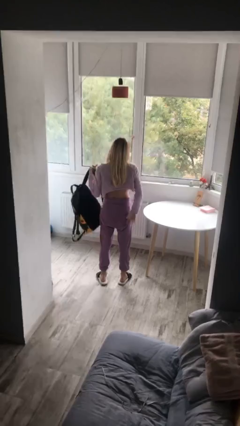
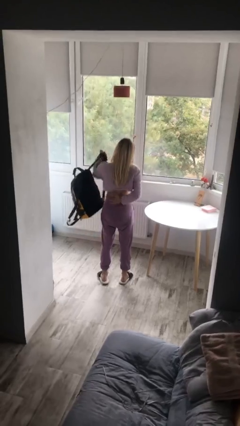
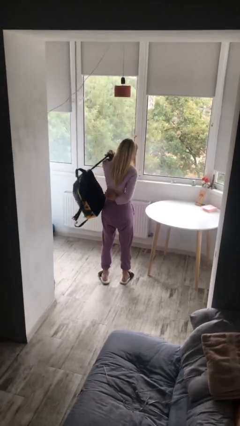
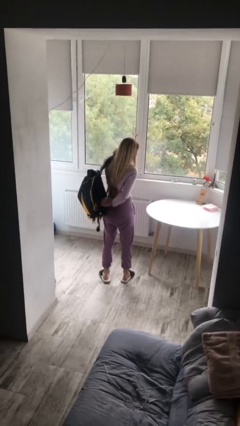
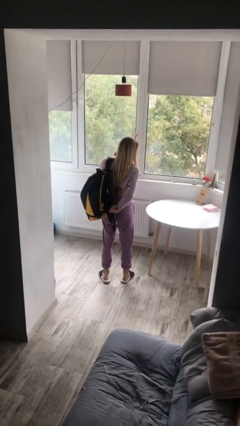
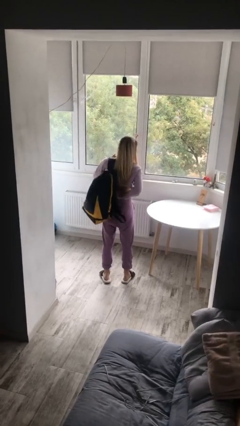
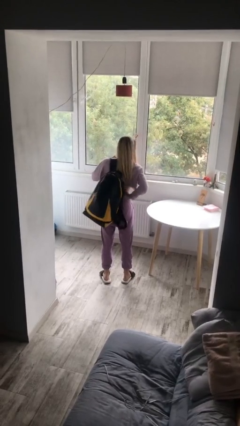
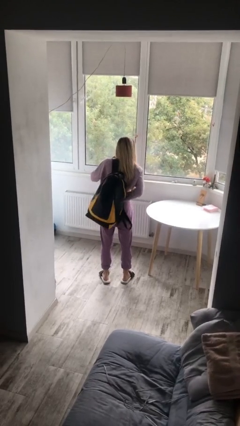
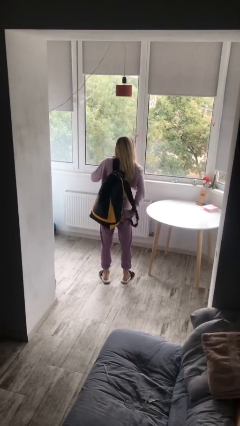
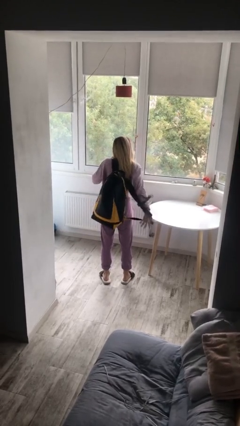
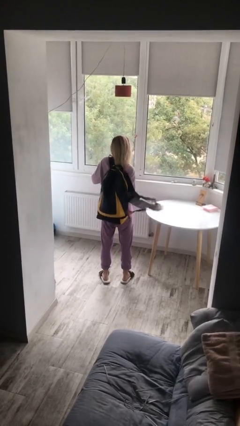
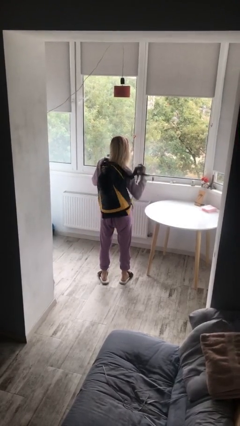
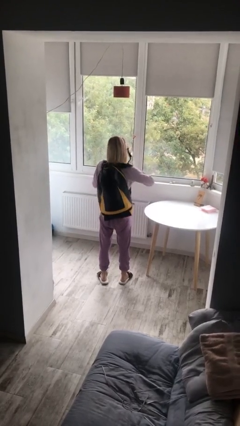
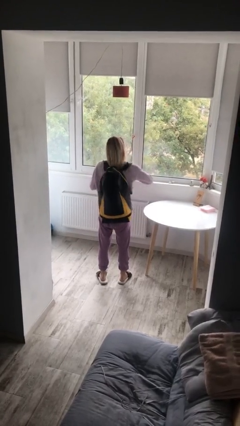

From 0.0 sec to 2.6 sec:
person puts on backpack

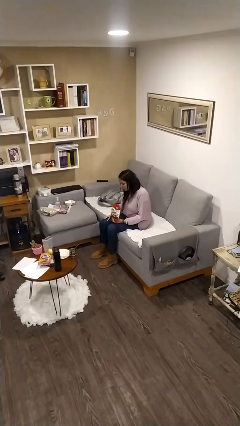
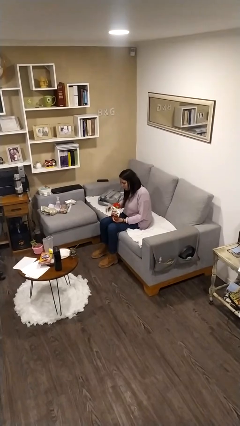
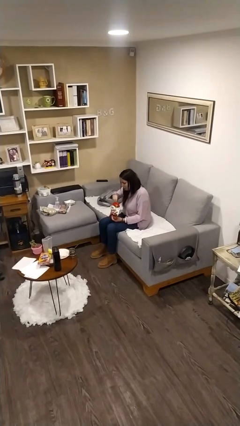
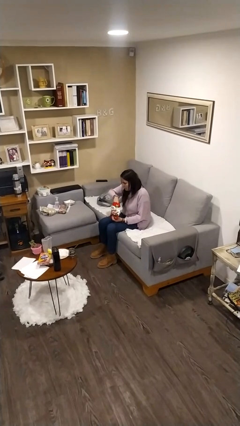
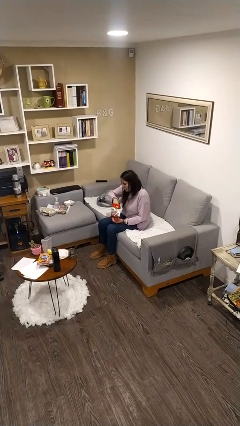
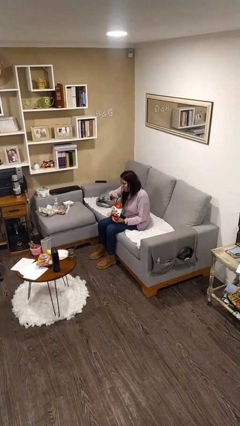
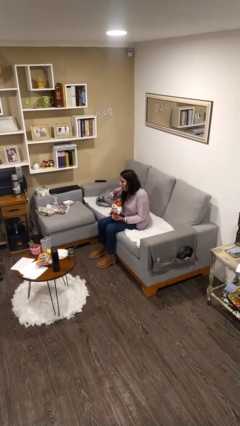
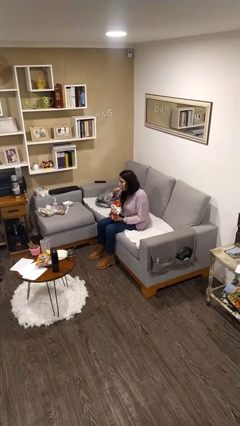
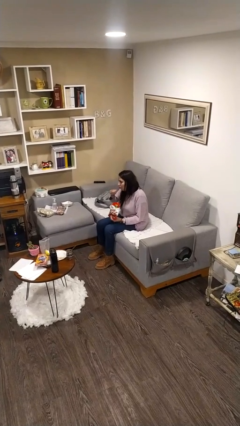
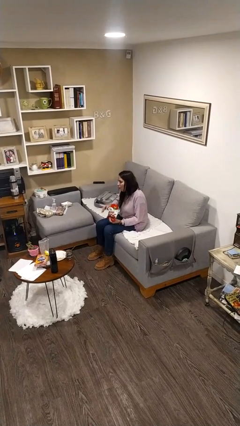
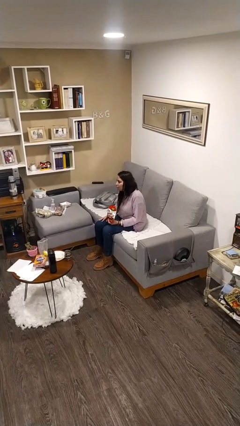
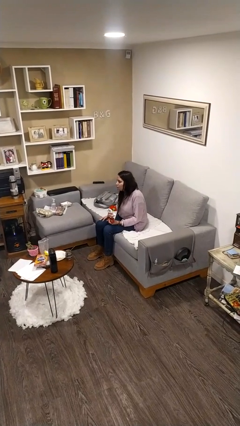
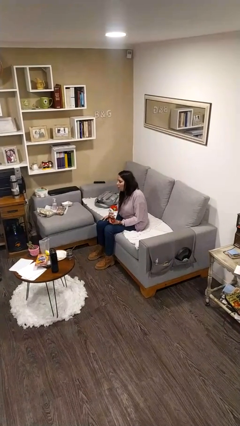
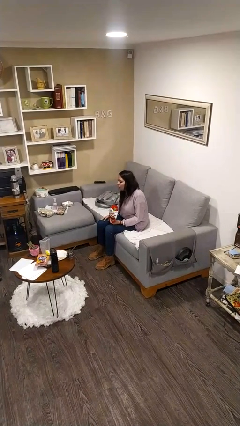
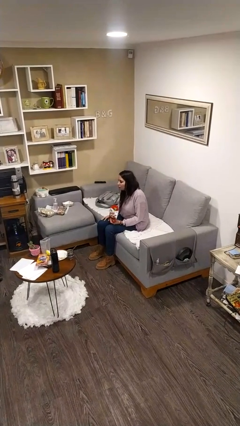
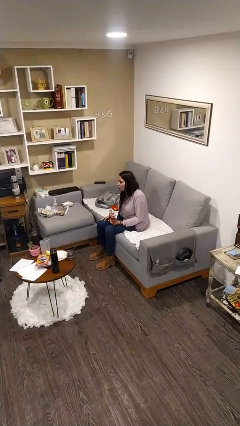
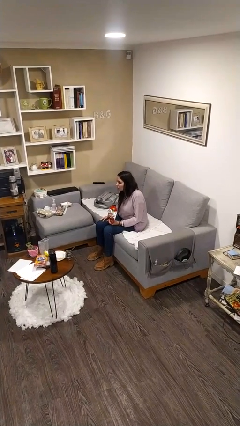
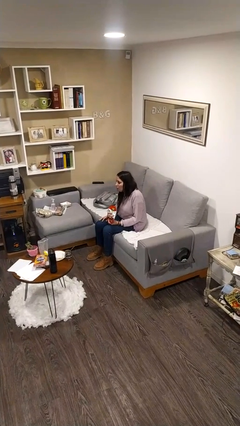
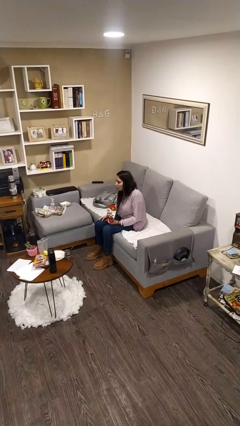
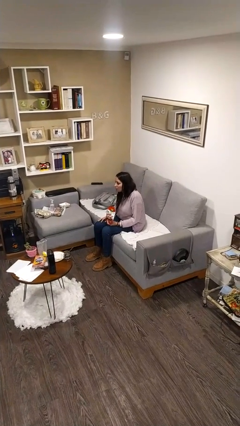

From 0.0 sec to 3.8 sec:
person eats snack from bag

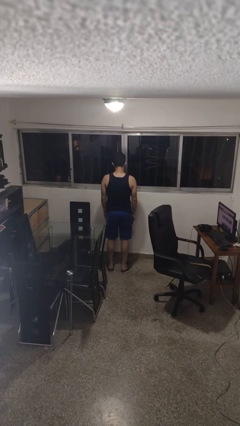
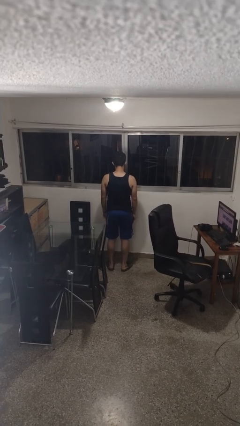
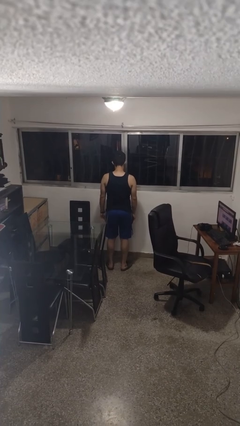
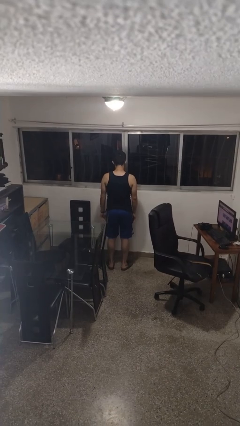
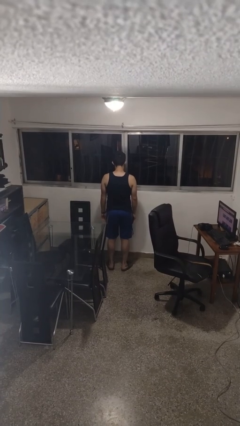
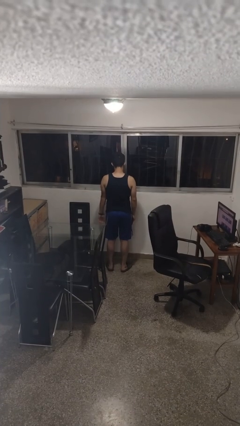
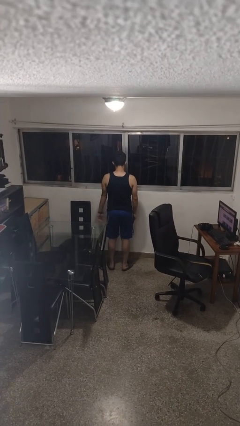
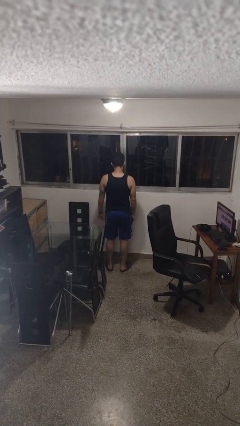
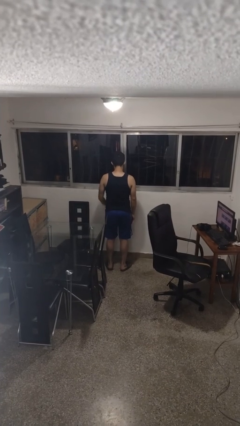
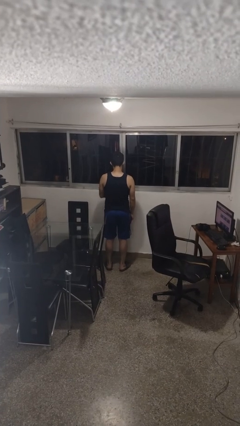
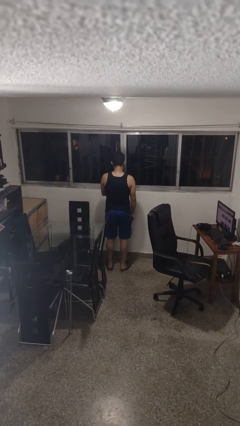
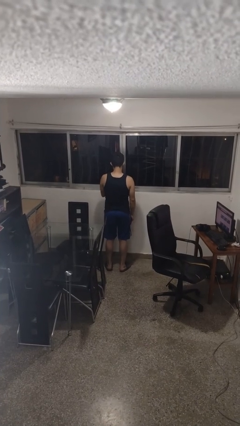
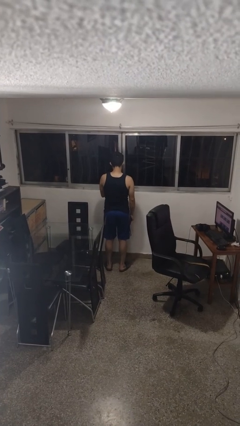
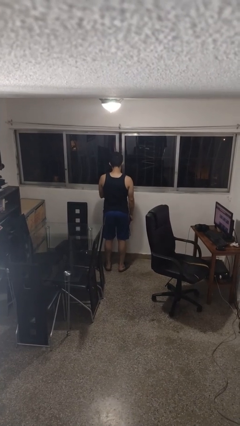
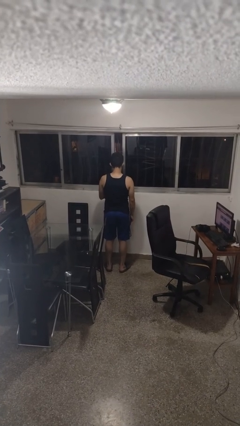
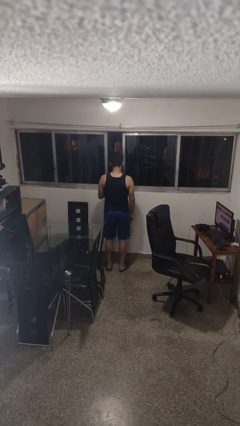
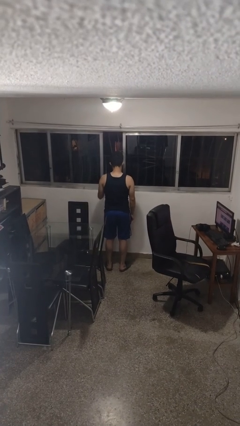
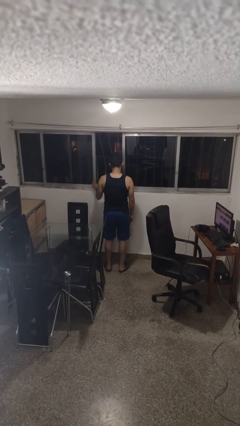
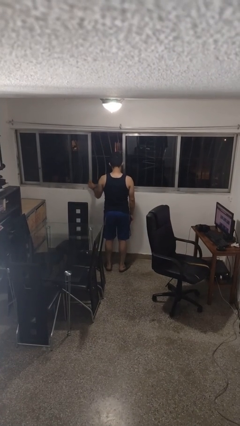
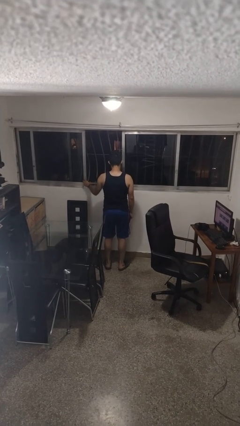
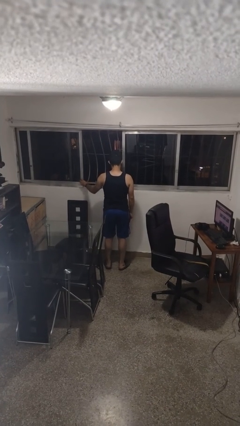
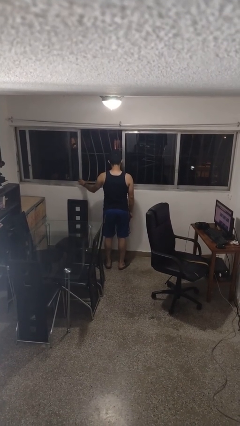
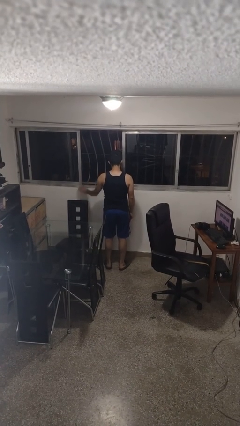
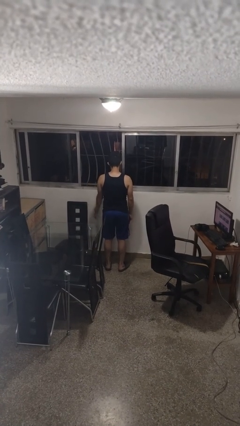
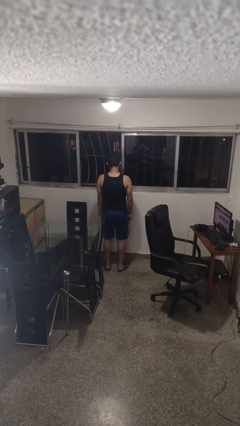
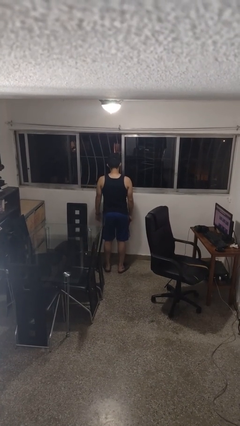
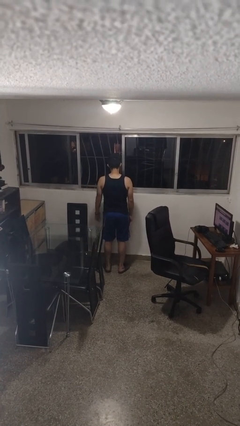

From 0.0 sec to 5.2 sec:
person opens home window

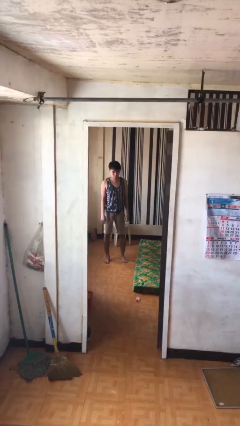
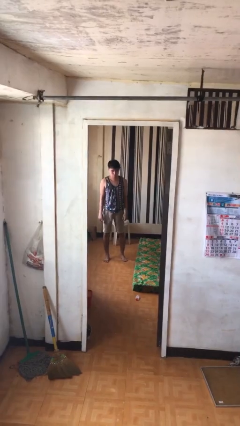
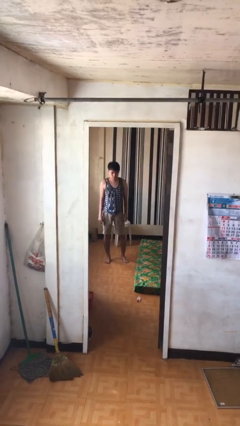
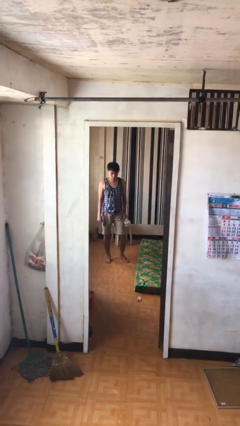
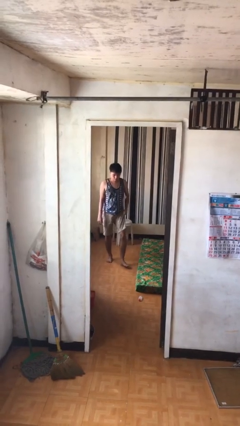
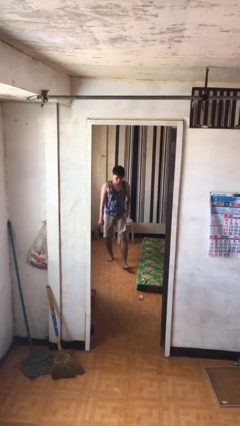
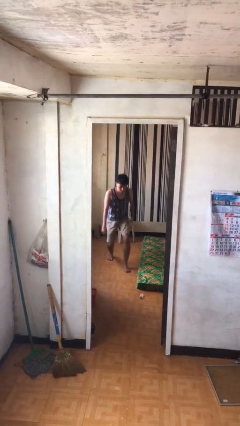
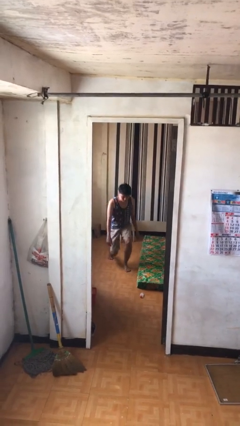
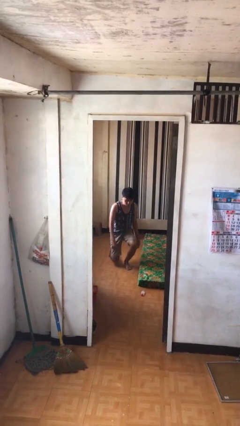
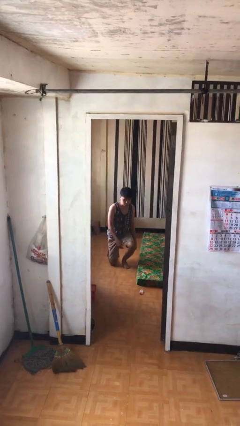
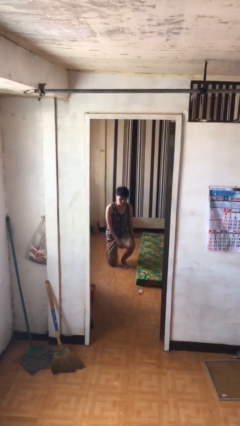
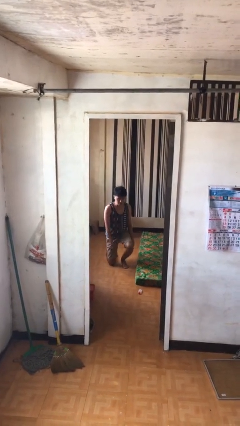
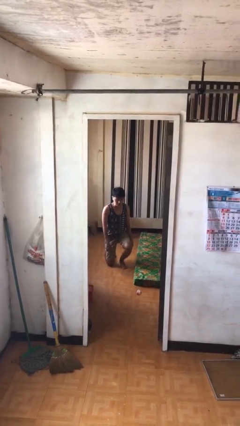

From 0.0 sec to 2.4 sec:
person kneels

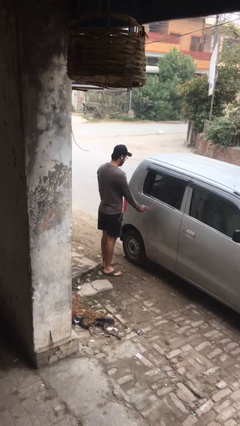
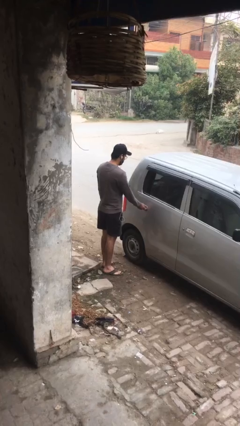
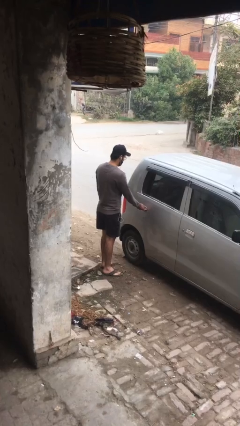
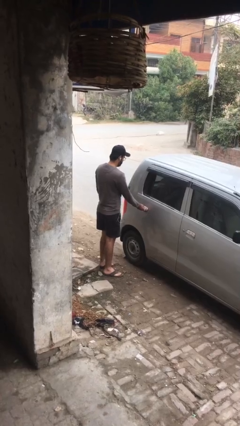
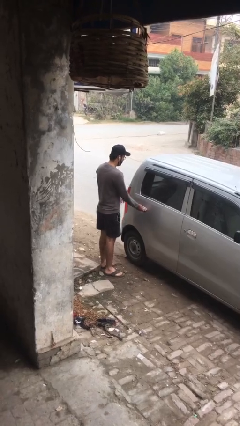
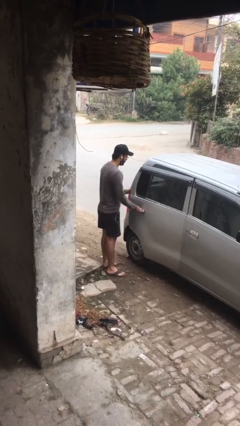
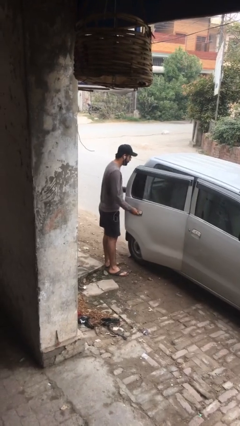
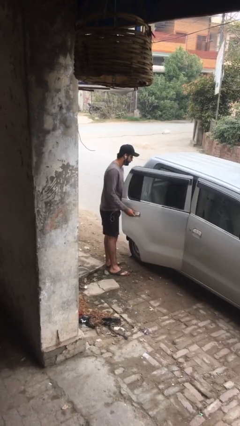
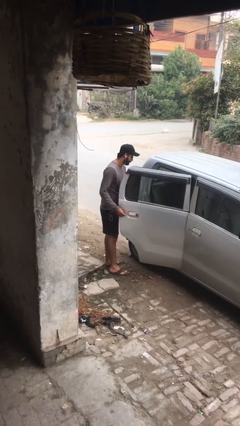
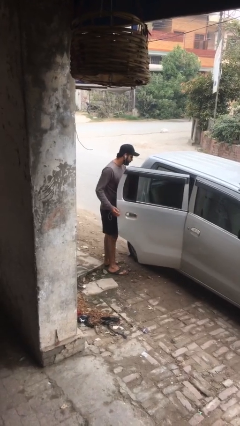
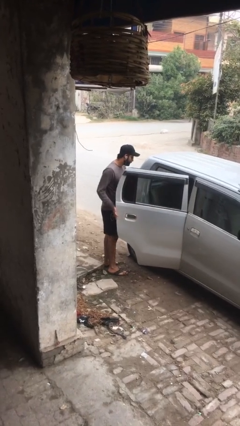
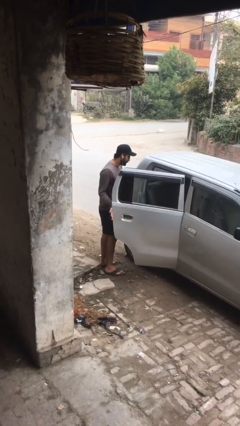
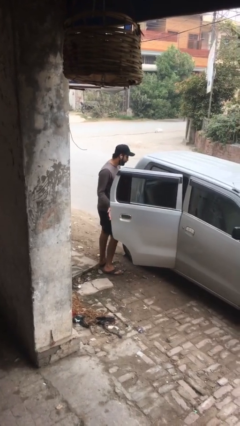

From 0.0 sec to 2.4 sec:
person opens car door

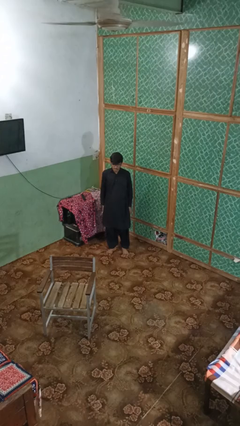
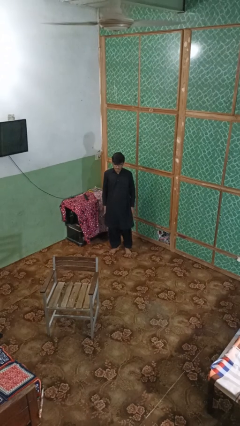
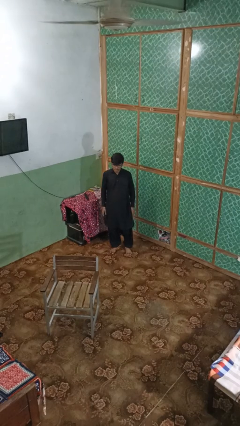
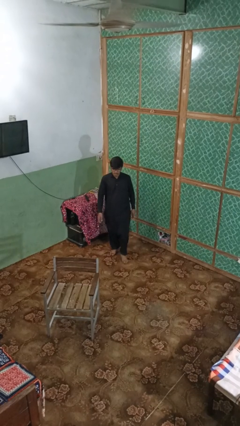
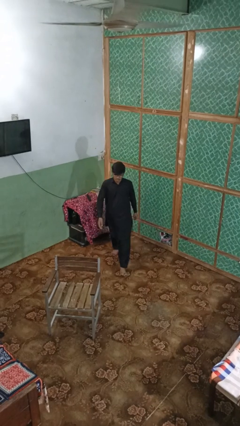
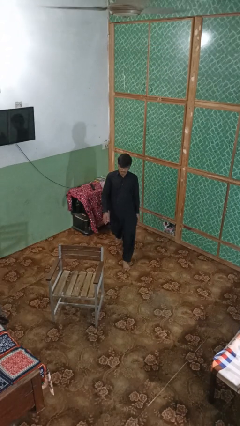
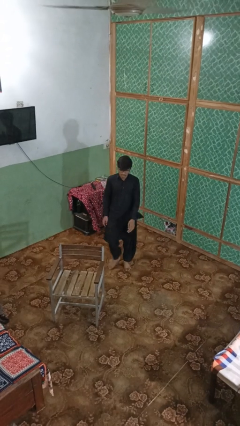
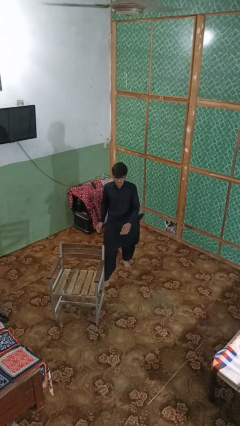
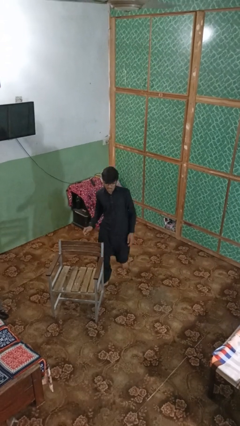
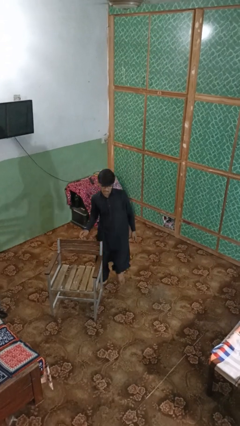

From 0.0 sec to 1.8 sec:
person trips on object on floor
